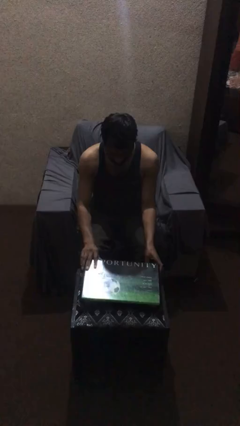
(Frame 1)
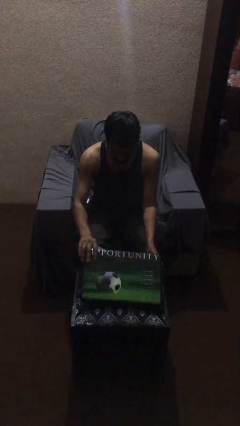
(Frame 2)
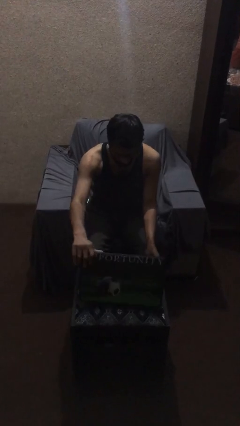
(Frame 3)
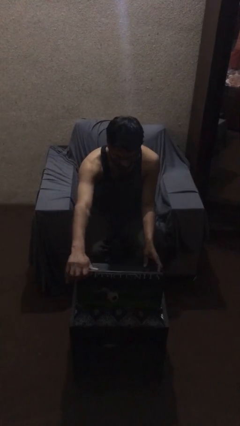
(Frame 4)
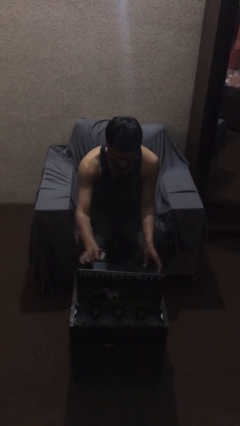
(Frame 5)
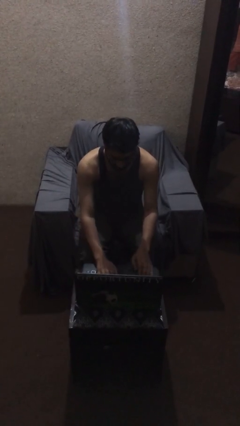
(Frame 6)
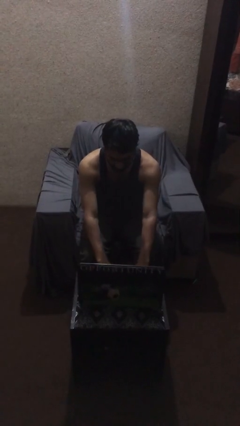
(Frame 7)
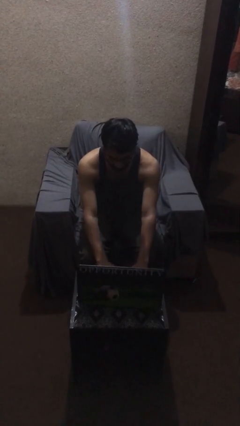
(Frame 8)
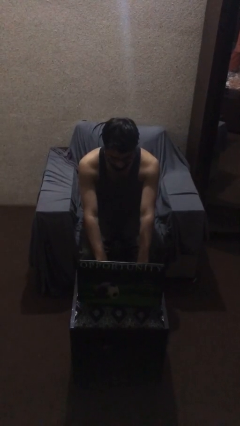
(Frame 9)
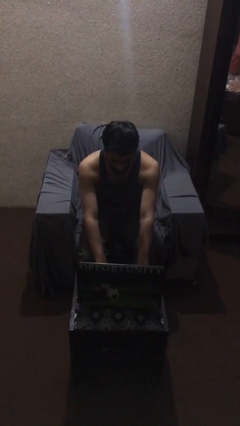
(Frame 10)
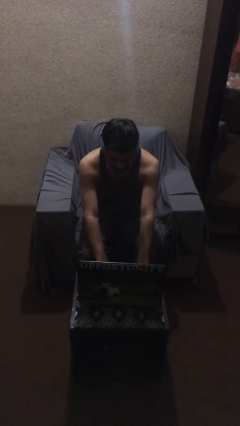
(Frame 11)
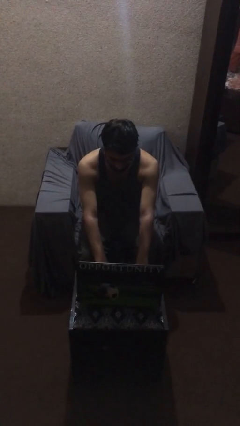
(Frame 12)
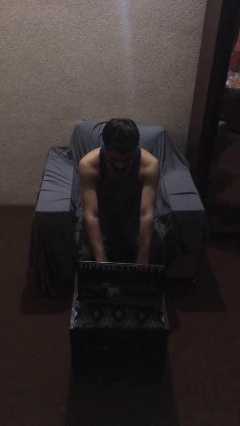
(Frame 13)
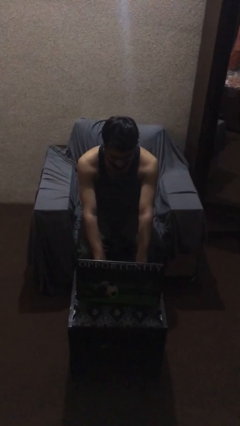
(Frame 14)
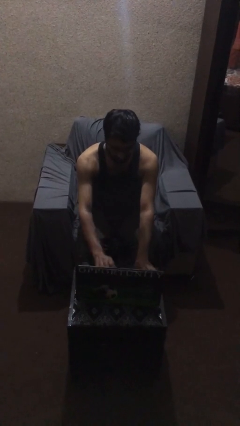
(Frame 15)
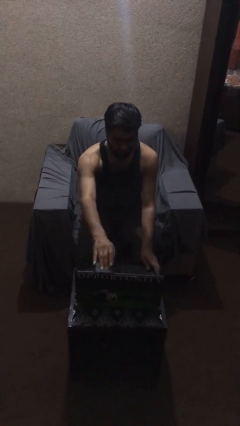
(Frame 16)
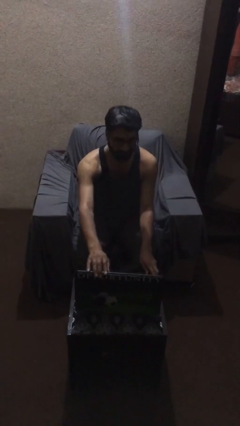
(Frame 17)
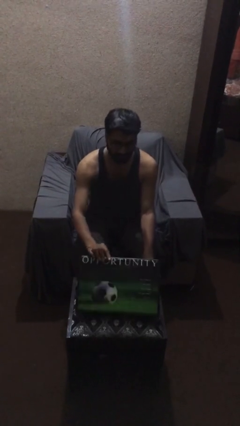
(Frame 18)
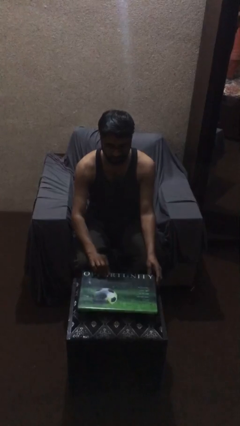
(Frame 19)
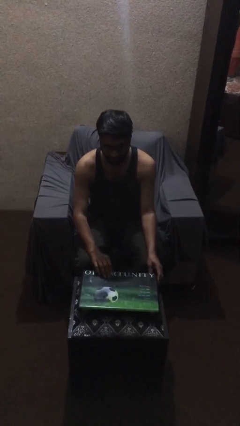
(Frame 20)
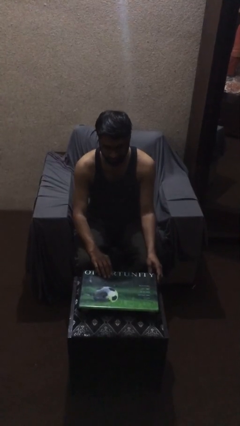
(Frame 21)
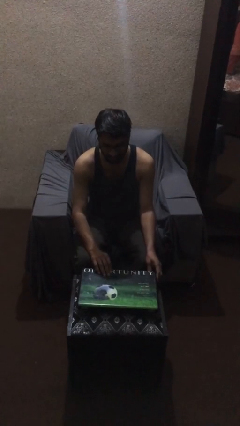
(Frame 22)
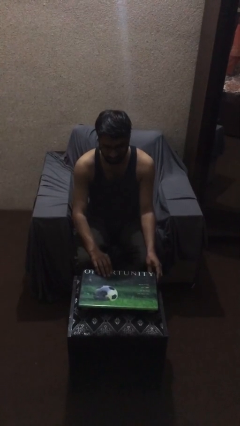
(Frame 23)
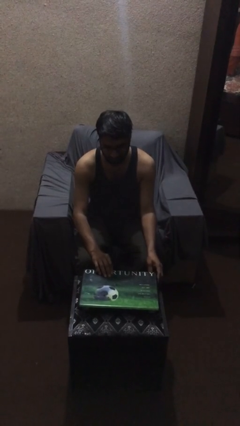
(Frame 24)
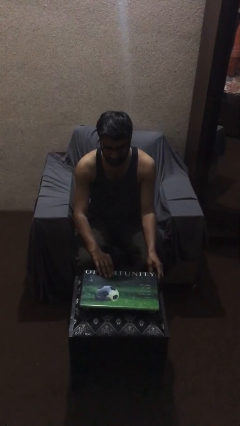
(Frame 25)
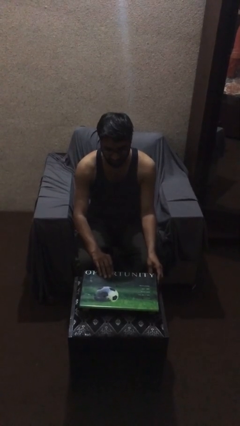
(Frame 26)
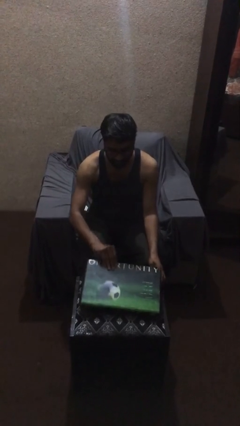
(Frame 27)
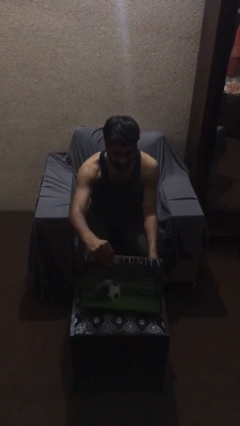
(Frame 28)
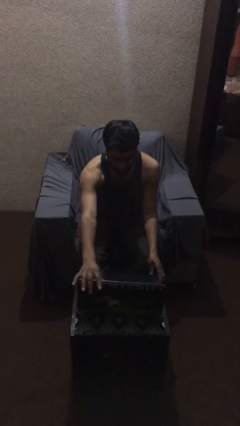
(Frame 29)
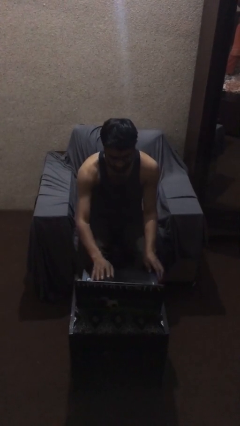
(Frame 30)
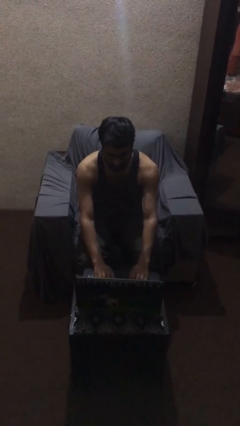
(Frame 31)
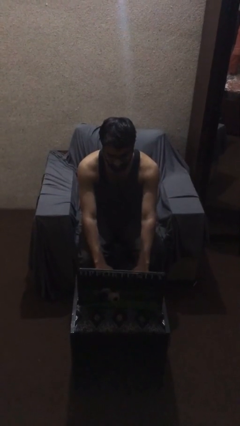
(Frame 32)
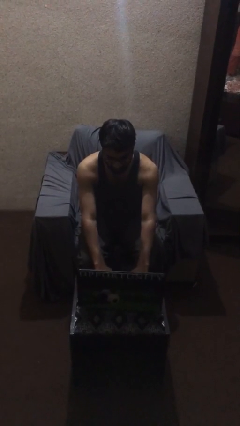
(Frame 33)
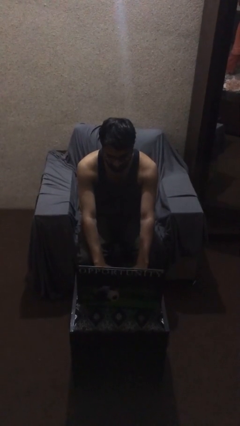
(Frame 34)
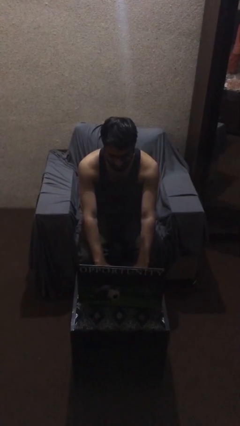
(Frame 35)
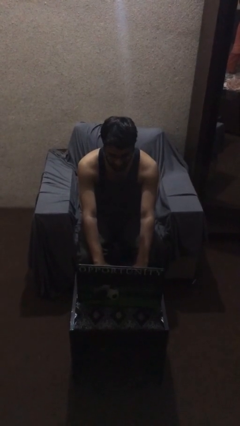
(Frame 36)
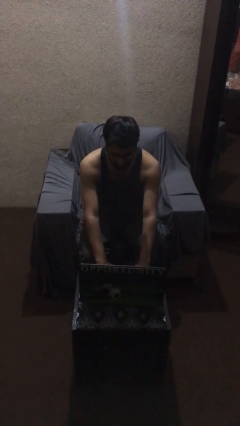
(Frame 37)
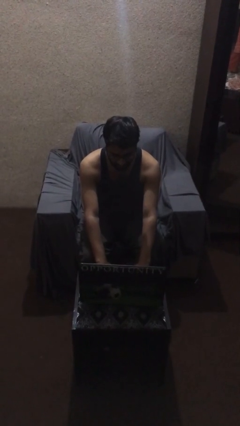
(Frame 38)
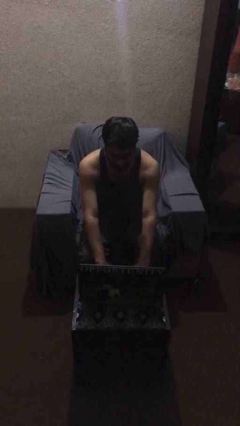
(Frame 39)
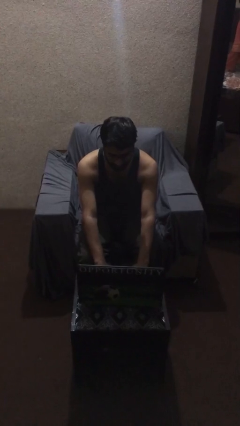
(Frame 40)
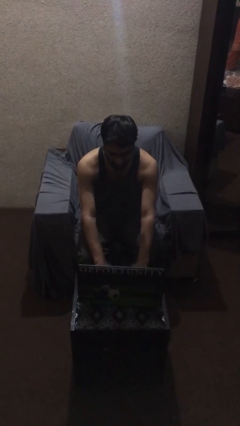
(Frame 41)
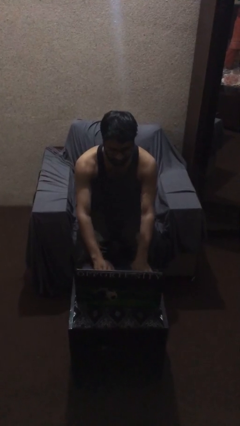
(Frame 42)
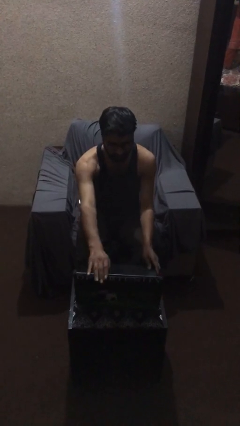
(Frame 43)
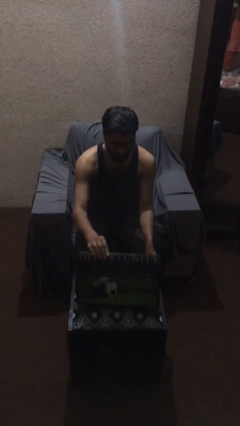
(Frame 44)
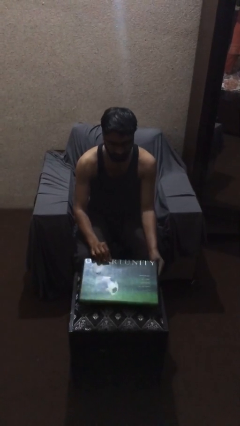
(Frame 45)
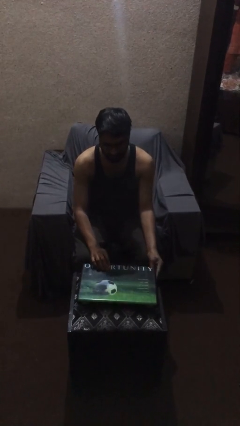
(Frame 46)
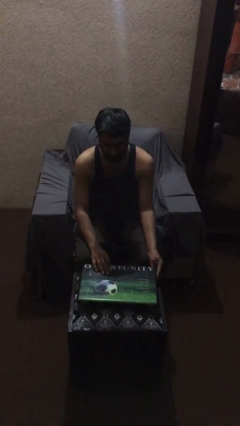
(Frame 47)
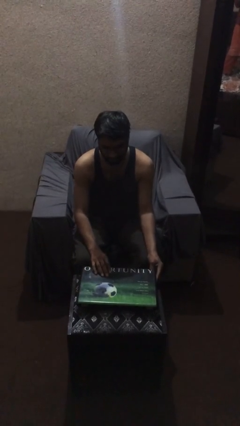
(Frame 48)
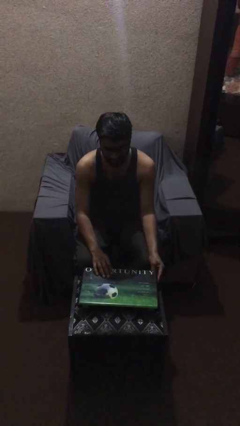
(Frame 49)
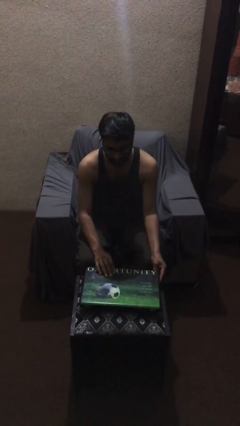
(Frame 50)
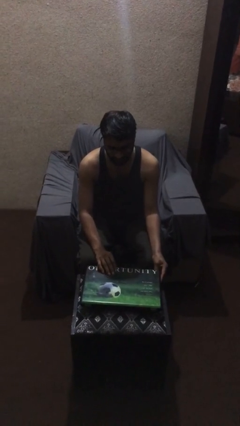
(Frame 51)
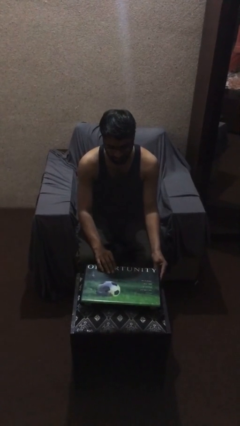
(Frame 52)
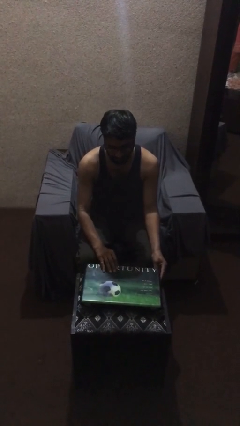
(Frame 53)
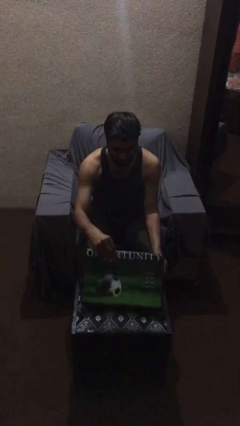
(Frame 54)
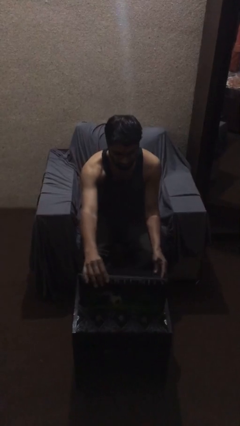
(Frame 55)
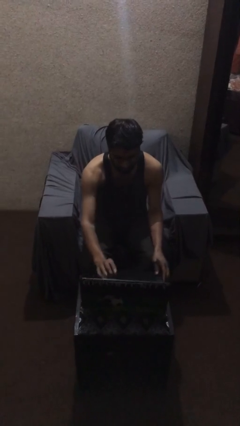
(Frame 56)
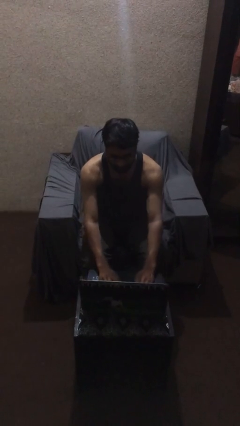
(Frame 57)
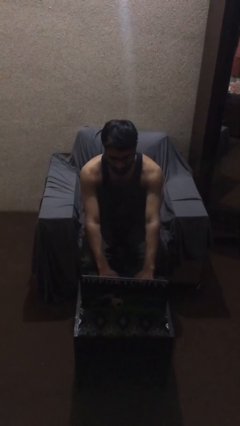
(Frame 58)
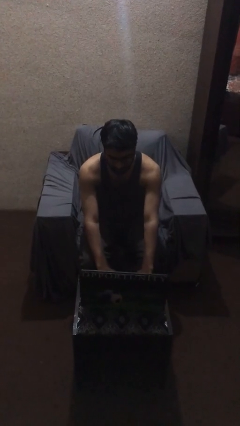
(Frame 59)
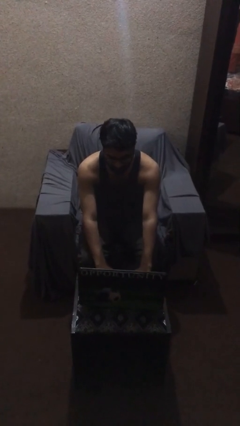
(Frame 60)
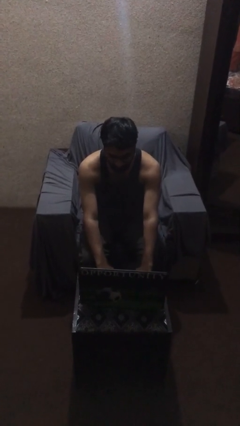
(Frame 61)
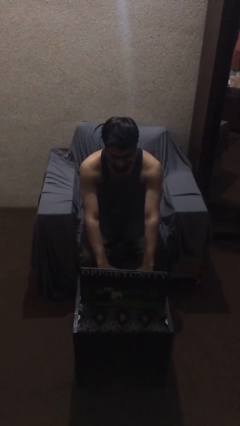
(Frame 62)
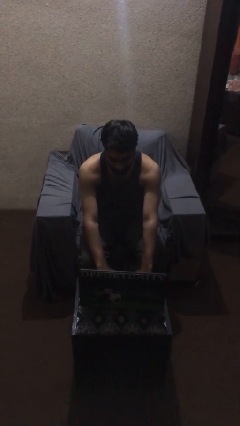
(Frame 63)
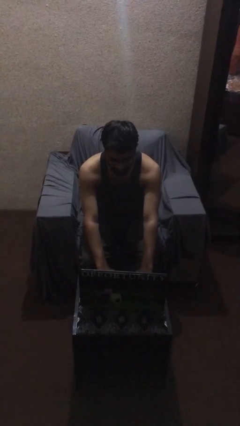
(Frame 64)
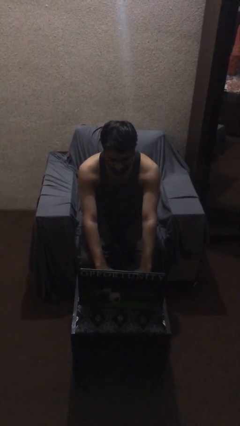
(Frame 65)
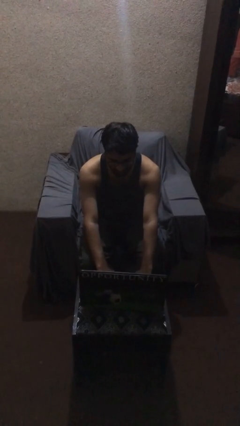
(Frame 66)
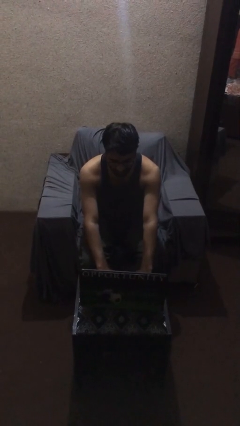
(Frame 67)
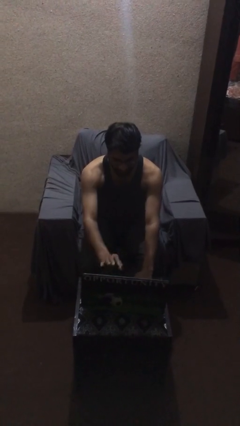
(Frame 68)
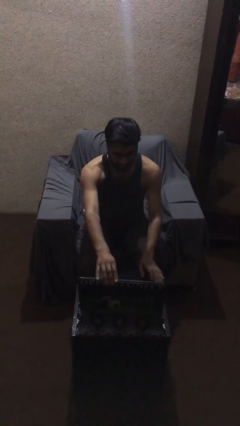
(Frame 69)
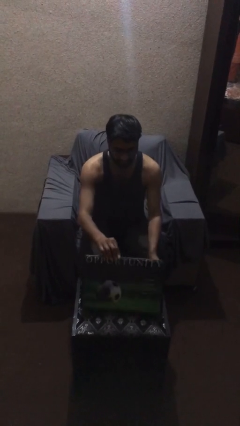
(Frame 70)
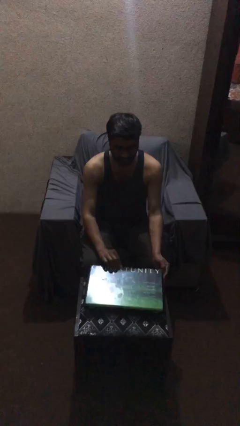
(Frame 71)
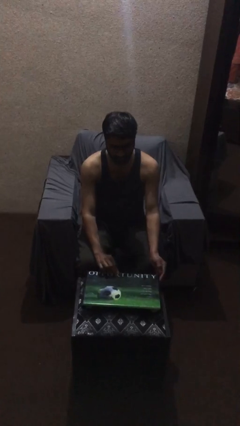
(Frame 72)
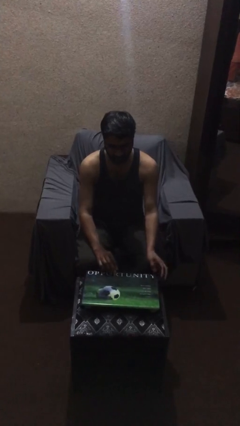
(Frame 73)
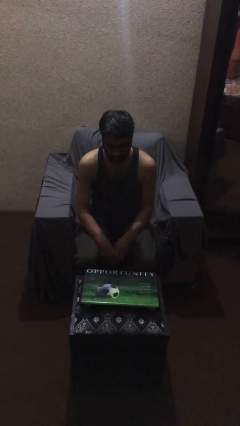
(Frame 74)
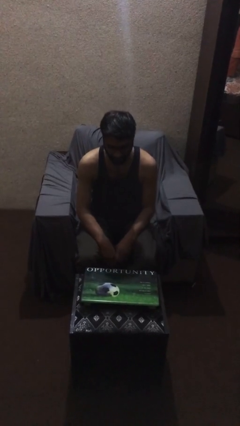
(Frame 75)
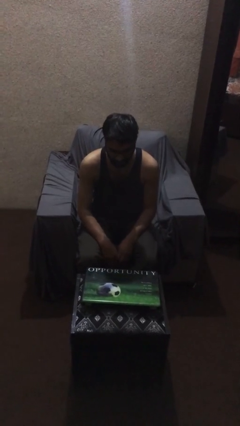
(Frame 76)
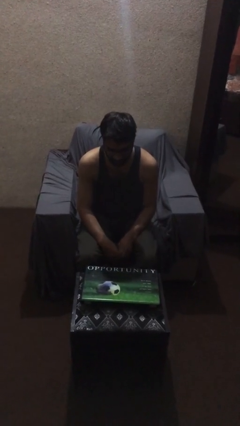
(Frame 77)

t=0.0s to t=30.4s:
person interacts with laptop

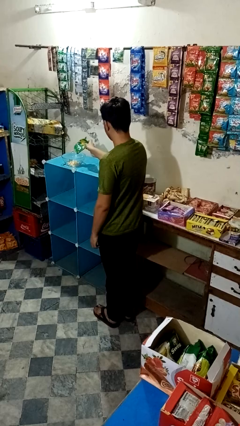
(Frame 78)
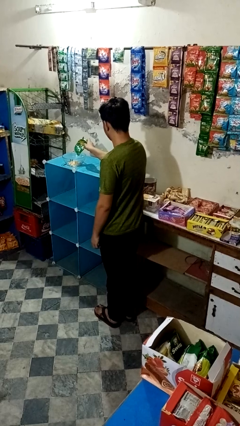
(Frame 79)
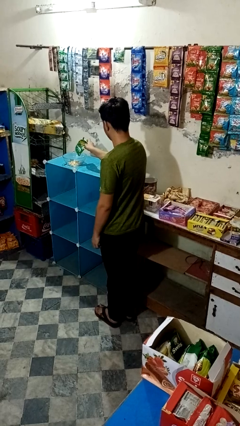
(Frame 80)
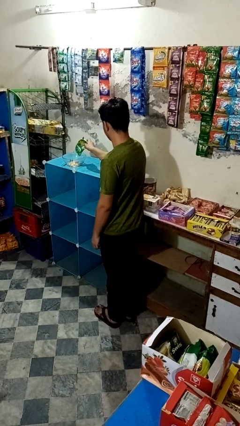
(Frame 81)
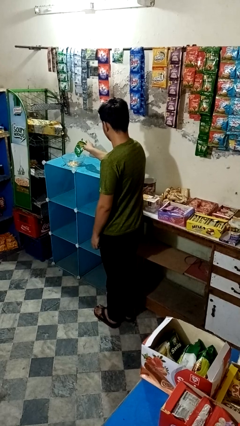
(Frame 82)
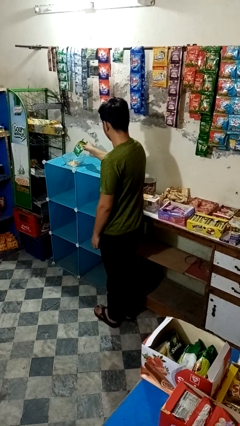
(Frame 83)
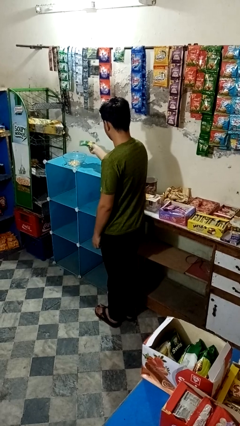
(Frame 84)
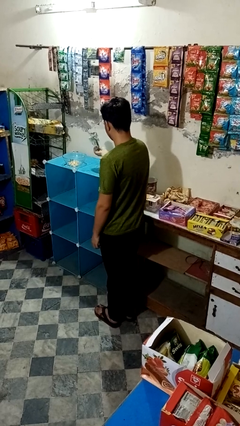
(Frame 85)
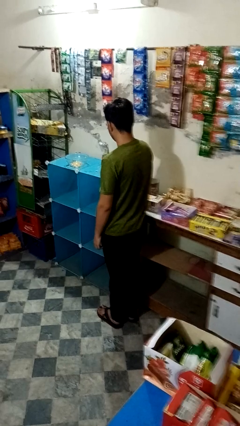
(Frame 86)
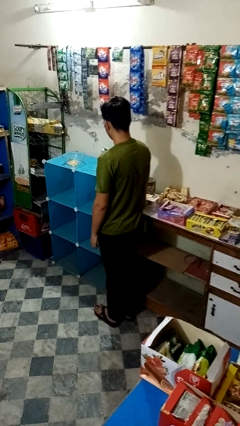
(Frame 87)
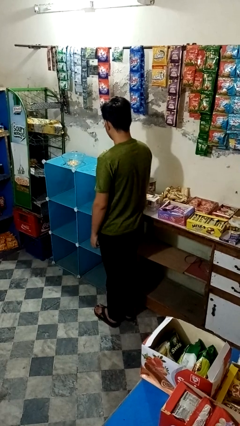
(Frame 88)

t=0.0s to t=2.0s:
person pours into bowl

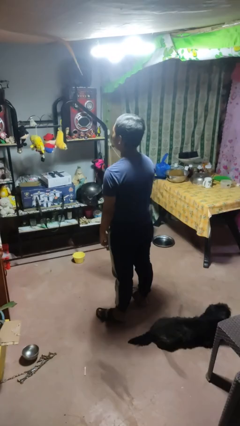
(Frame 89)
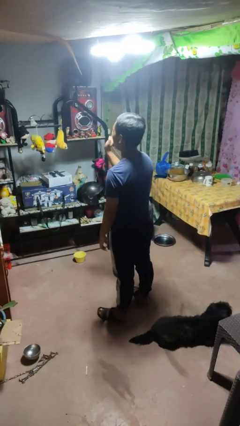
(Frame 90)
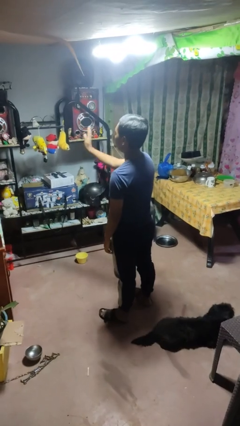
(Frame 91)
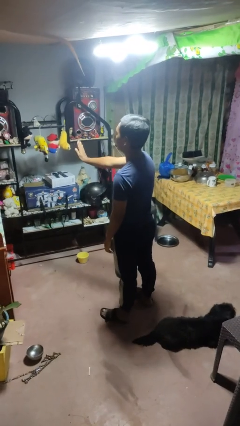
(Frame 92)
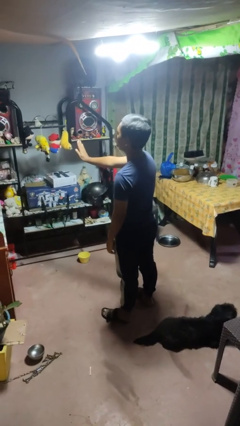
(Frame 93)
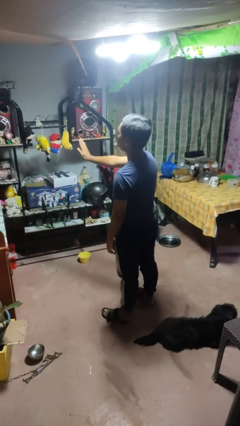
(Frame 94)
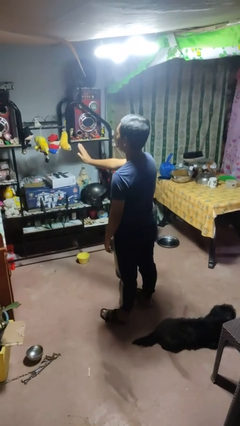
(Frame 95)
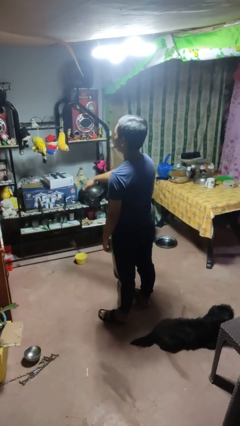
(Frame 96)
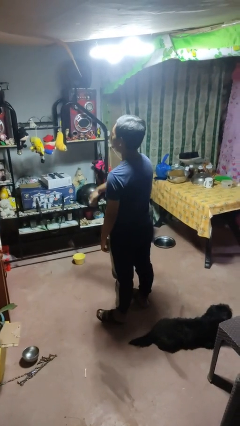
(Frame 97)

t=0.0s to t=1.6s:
person gestures stop
